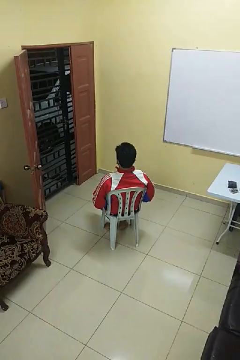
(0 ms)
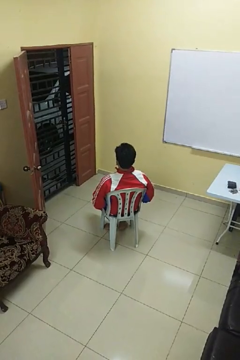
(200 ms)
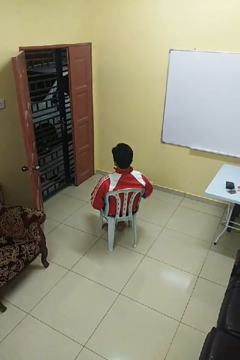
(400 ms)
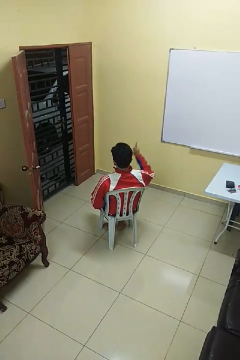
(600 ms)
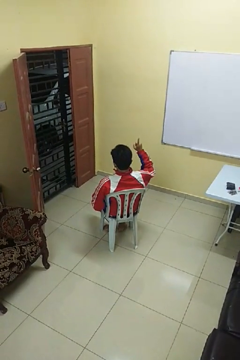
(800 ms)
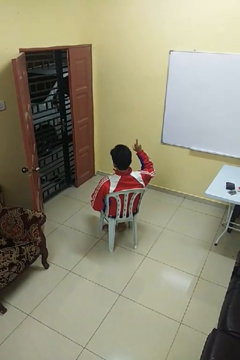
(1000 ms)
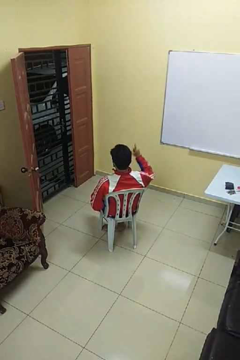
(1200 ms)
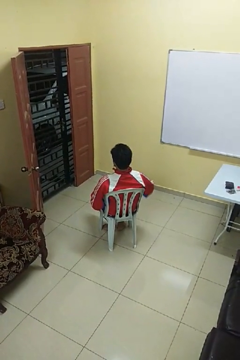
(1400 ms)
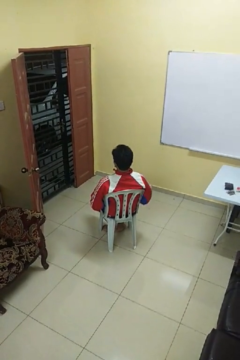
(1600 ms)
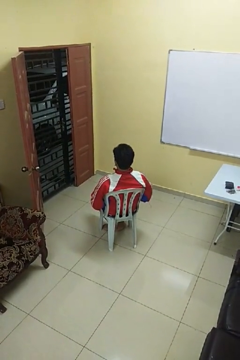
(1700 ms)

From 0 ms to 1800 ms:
person gestures number one

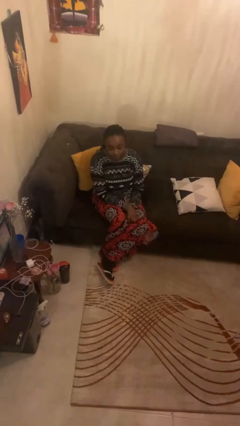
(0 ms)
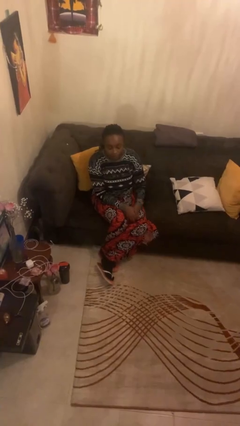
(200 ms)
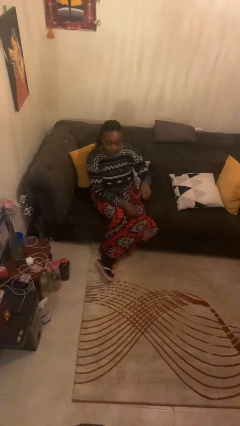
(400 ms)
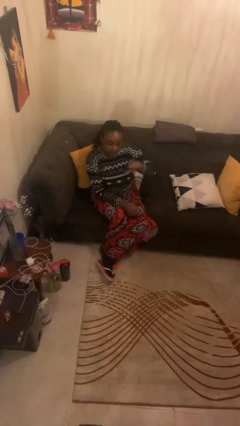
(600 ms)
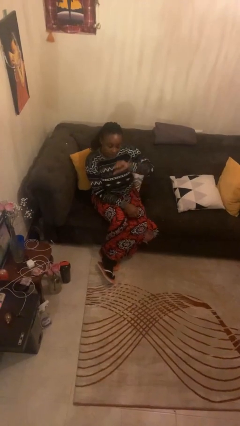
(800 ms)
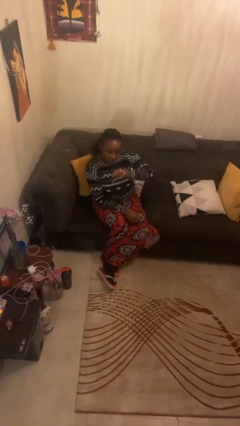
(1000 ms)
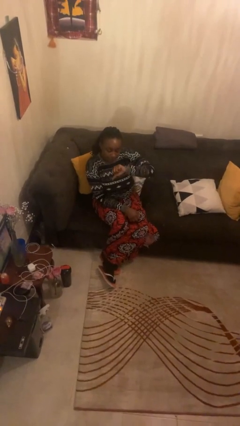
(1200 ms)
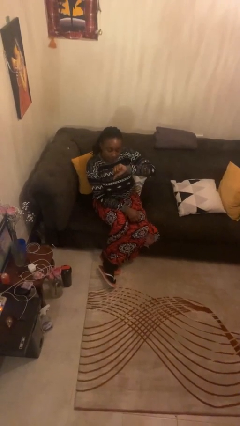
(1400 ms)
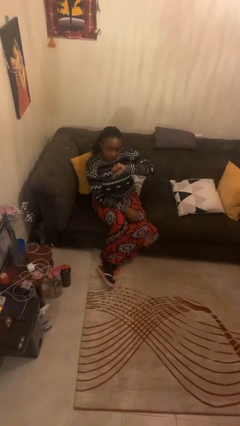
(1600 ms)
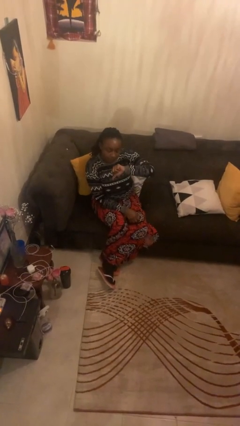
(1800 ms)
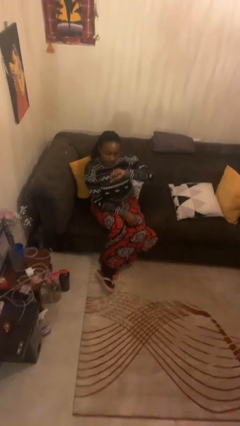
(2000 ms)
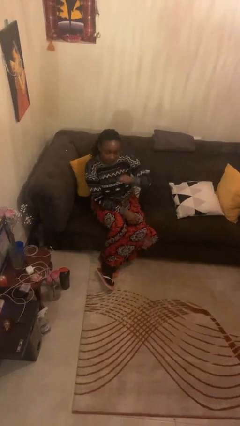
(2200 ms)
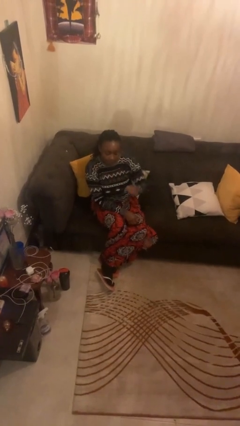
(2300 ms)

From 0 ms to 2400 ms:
person gestures thumbs down

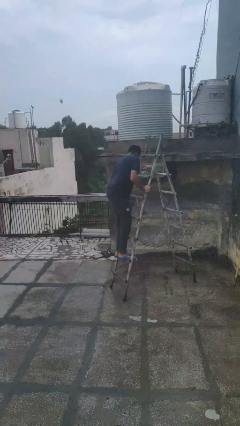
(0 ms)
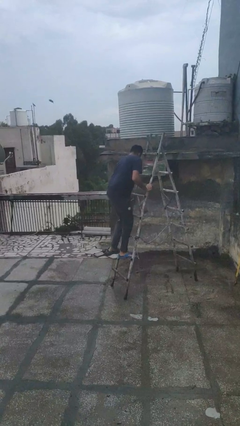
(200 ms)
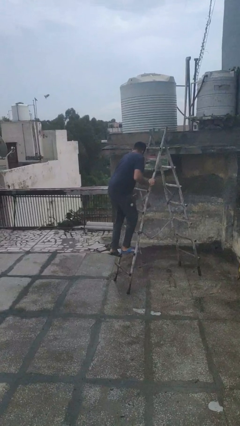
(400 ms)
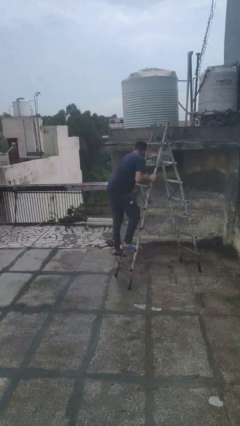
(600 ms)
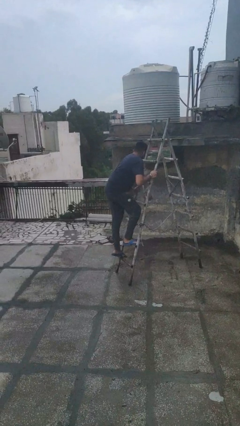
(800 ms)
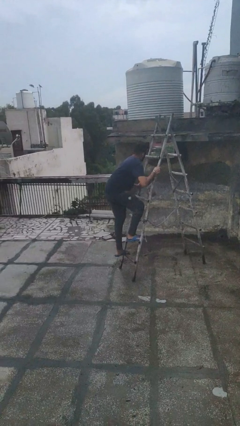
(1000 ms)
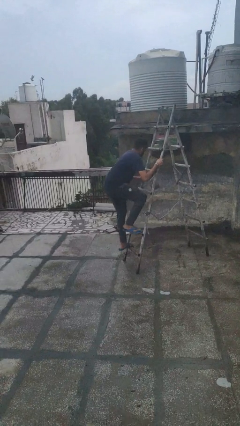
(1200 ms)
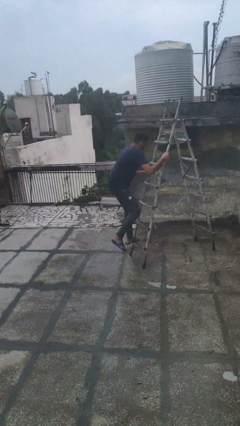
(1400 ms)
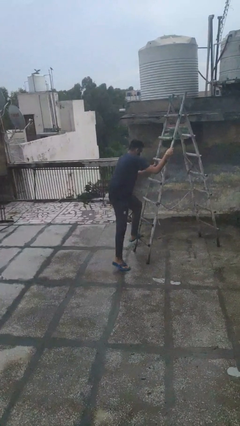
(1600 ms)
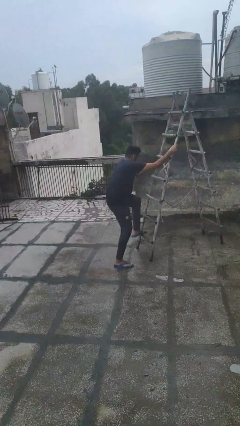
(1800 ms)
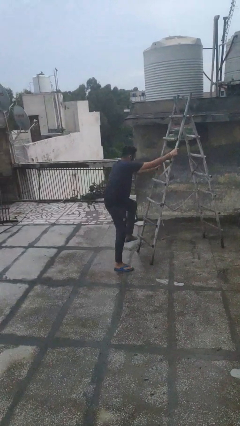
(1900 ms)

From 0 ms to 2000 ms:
person climbs down ladder

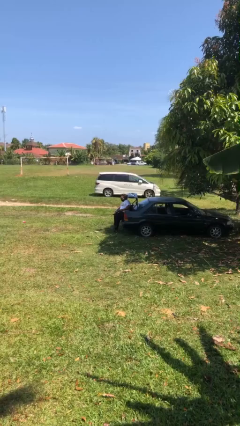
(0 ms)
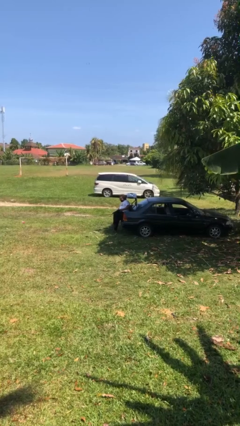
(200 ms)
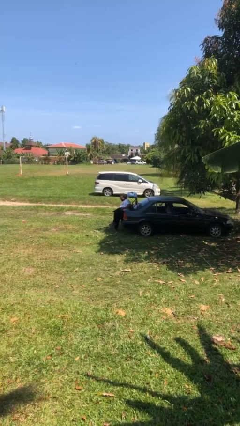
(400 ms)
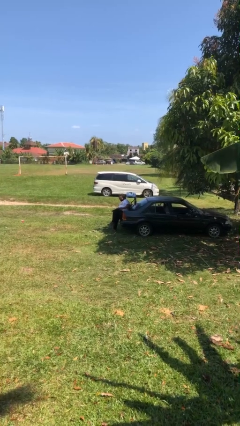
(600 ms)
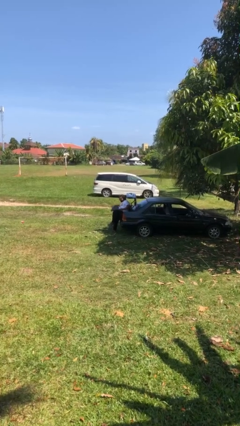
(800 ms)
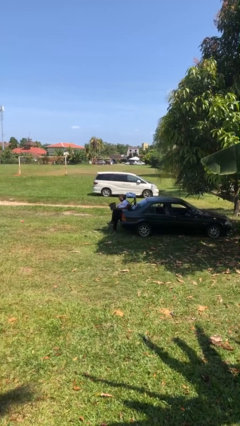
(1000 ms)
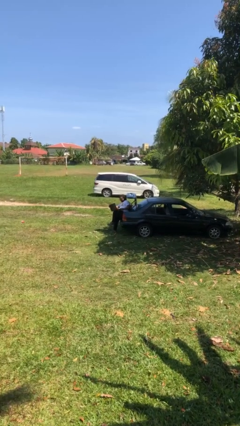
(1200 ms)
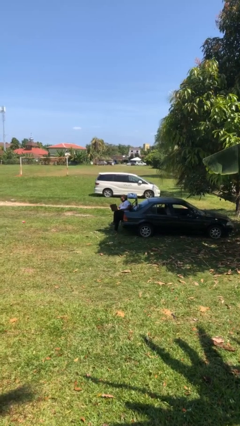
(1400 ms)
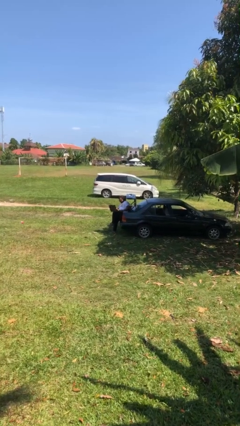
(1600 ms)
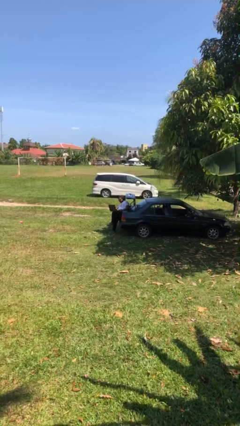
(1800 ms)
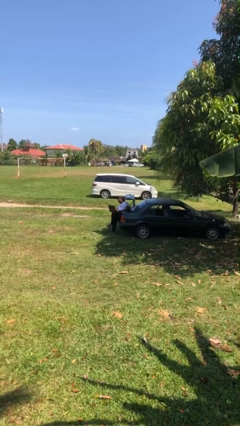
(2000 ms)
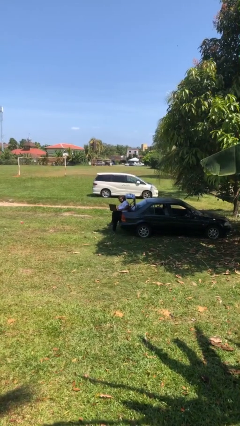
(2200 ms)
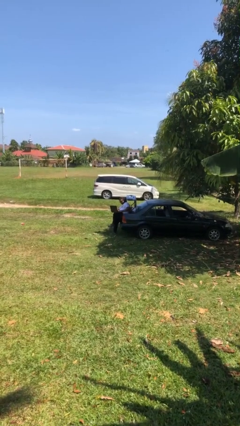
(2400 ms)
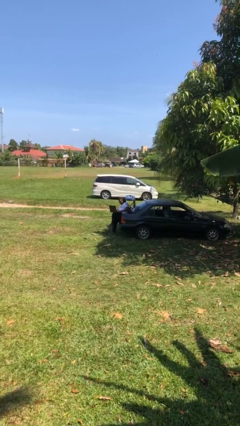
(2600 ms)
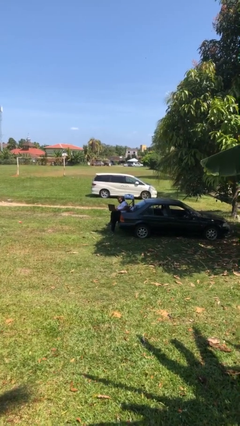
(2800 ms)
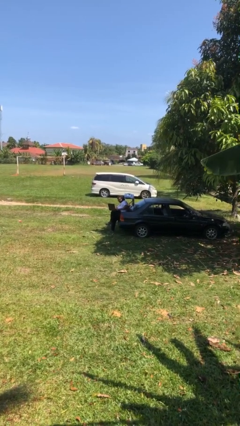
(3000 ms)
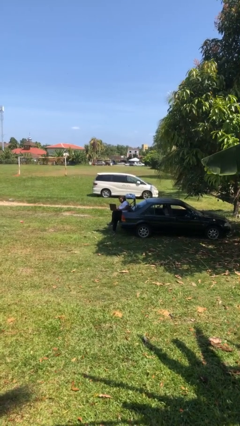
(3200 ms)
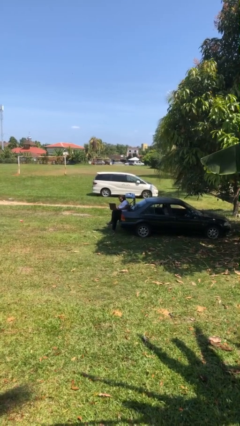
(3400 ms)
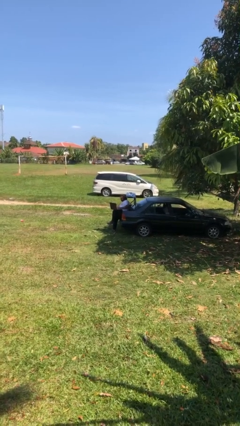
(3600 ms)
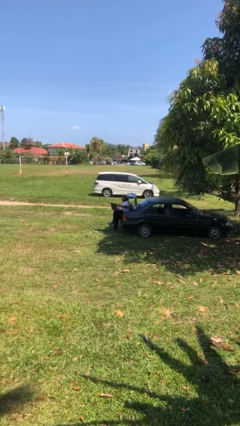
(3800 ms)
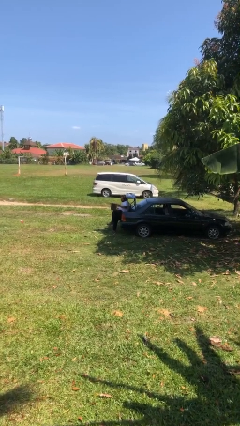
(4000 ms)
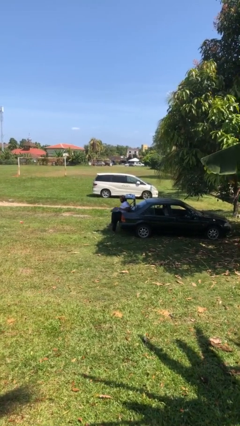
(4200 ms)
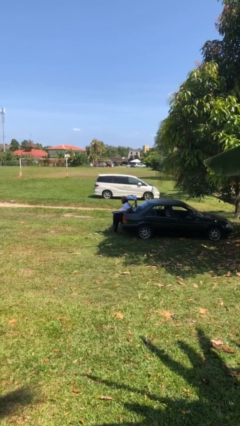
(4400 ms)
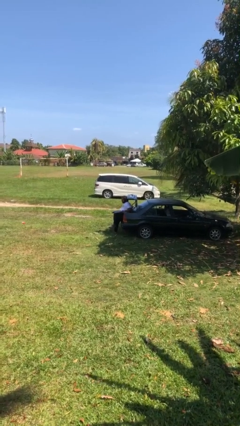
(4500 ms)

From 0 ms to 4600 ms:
person interacts with laptop

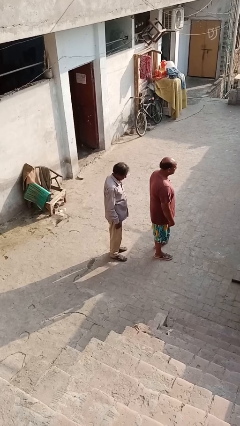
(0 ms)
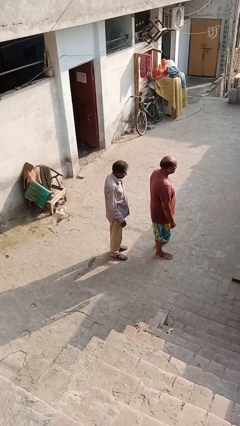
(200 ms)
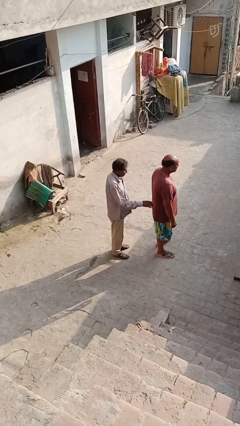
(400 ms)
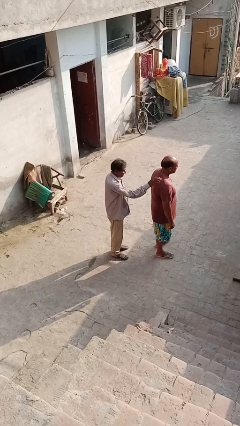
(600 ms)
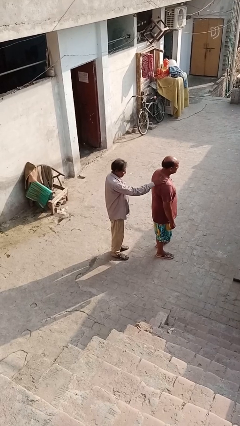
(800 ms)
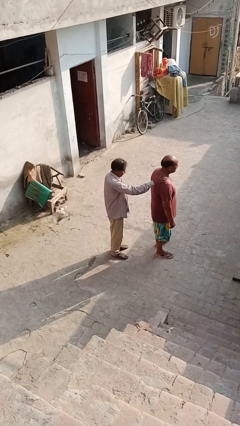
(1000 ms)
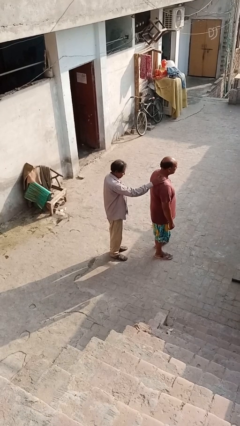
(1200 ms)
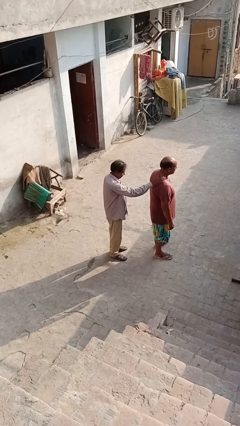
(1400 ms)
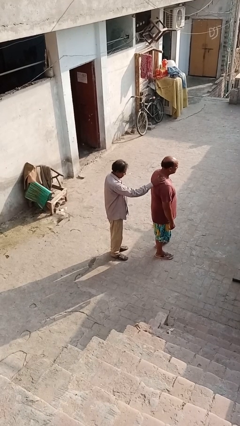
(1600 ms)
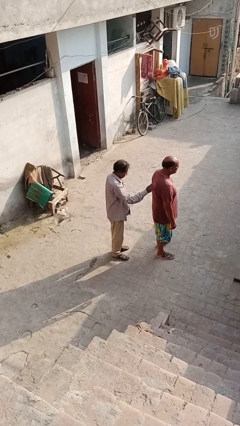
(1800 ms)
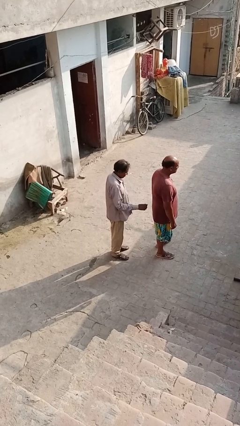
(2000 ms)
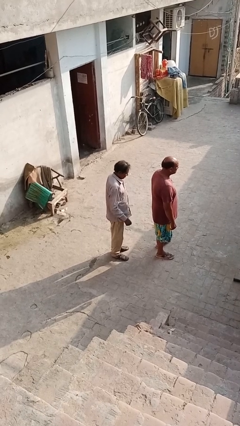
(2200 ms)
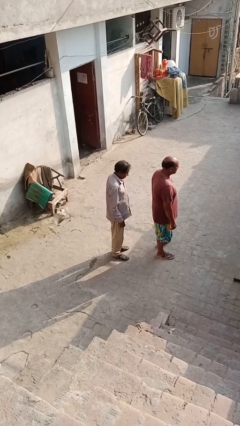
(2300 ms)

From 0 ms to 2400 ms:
person touches back of person

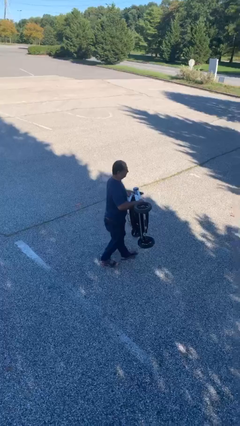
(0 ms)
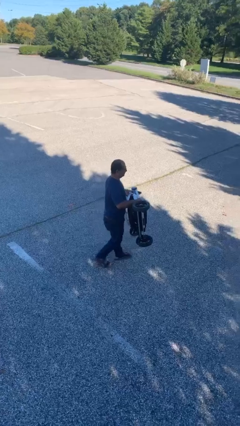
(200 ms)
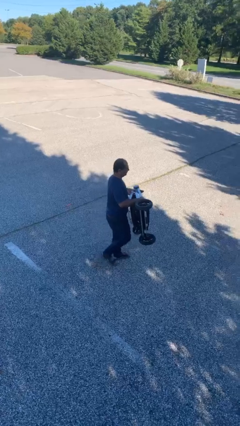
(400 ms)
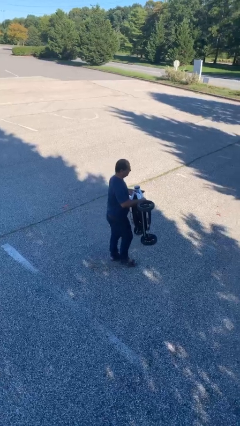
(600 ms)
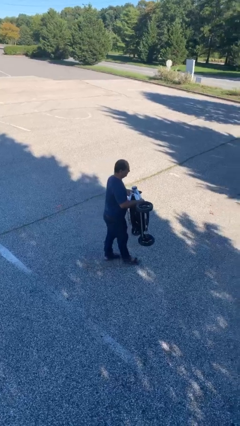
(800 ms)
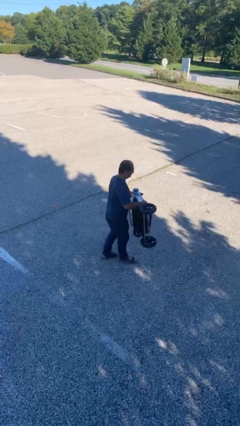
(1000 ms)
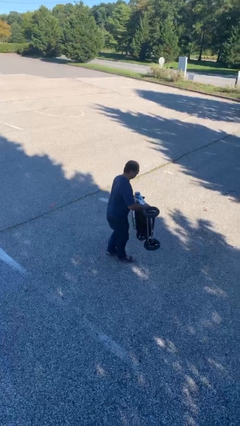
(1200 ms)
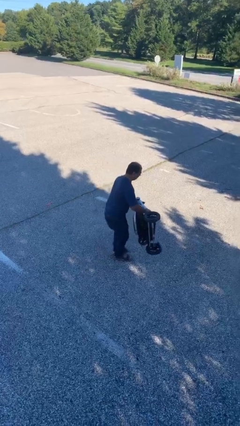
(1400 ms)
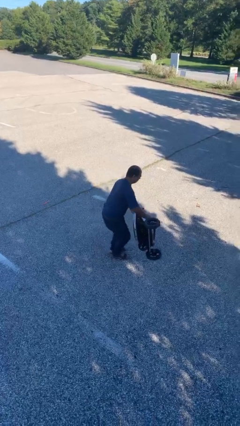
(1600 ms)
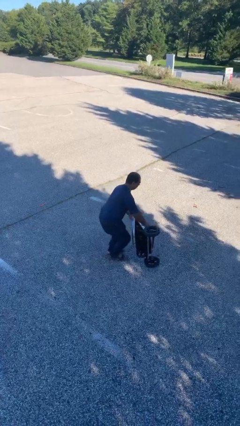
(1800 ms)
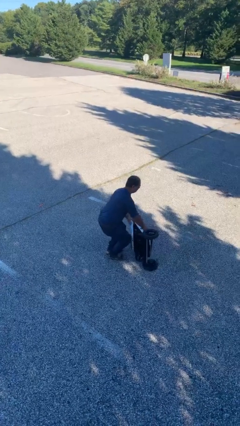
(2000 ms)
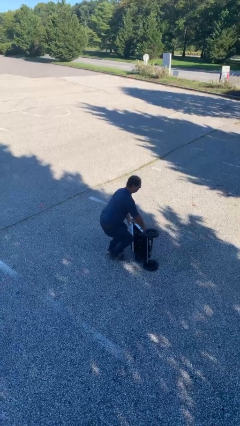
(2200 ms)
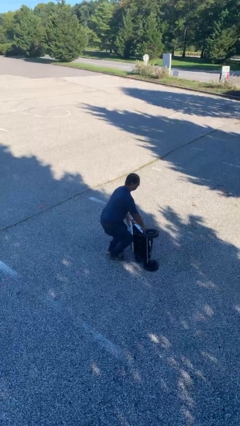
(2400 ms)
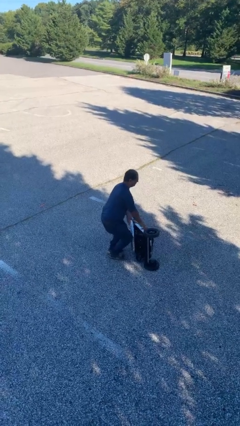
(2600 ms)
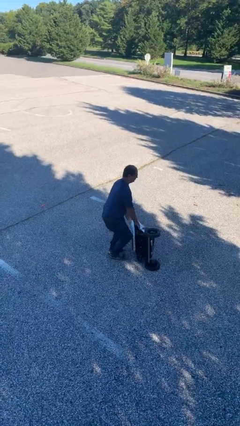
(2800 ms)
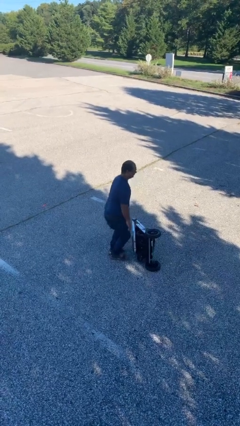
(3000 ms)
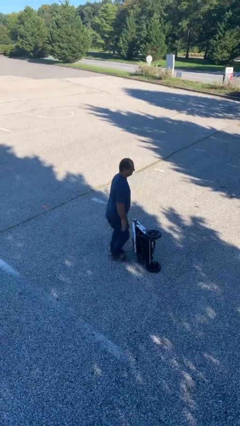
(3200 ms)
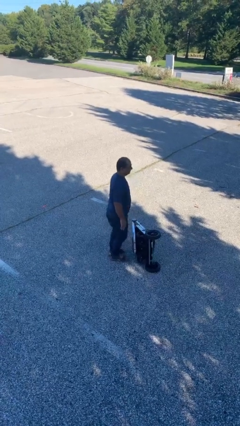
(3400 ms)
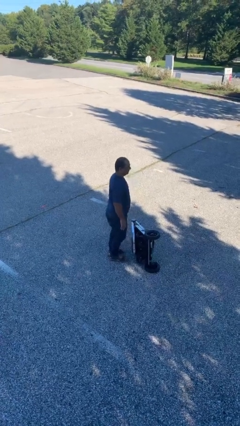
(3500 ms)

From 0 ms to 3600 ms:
person puts down object on floor

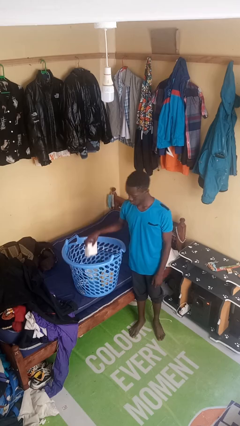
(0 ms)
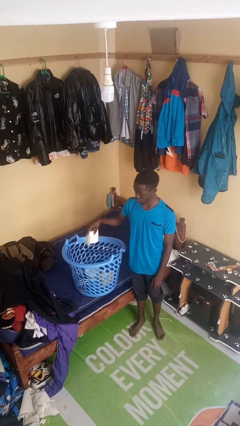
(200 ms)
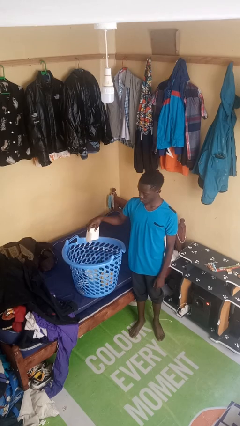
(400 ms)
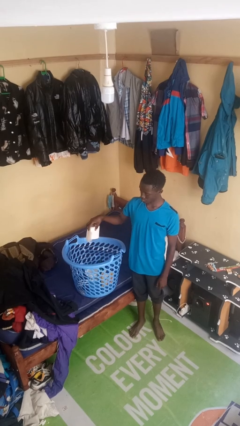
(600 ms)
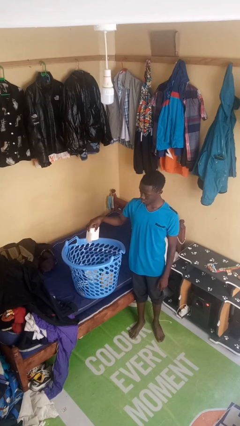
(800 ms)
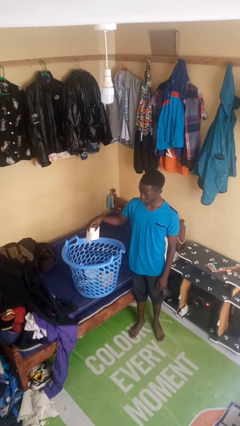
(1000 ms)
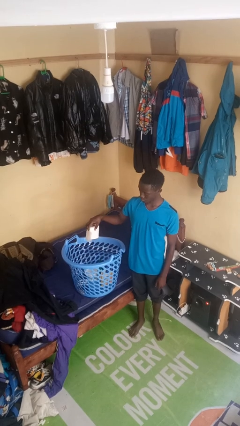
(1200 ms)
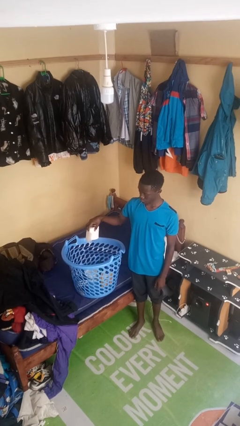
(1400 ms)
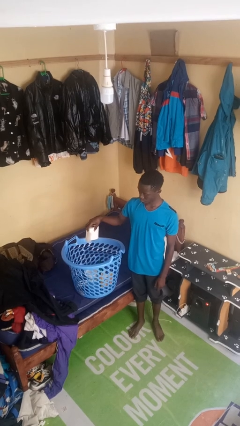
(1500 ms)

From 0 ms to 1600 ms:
person takes object from basket
